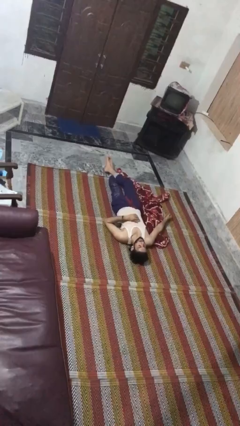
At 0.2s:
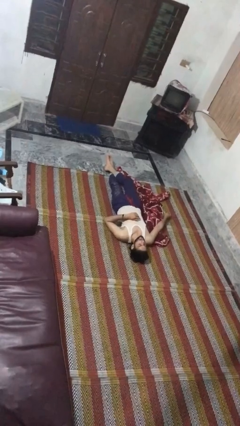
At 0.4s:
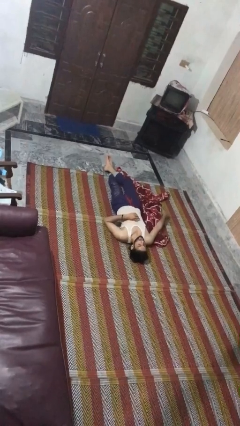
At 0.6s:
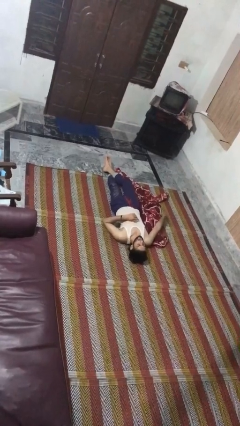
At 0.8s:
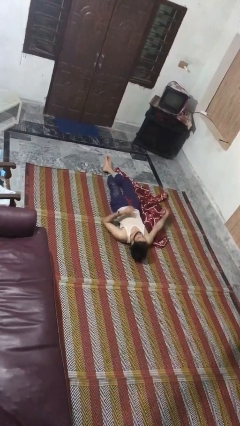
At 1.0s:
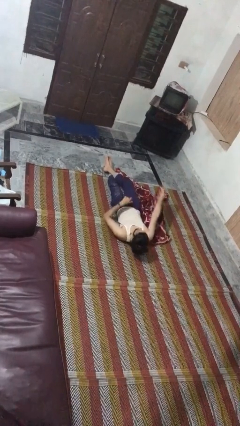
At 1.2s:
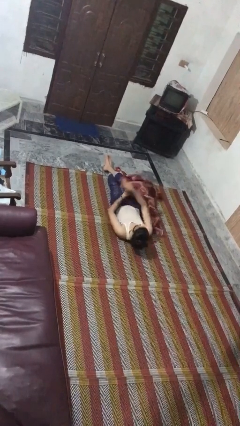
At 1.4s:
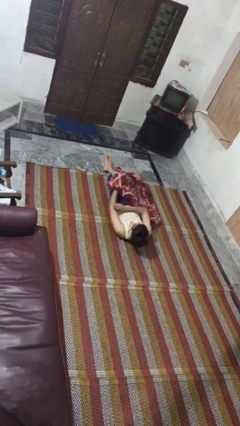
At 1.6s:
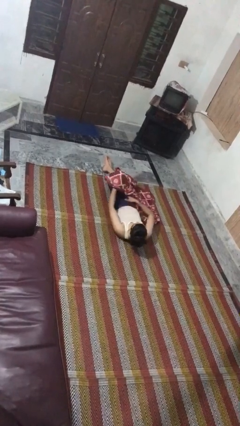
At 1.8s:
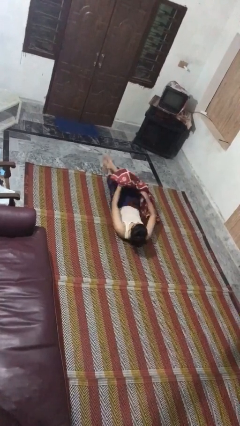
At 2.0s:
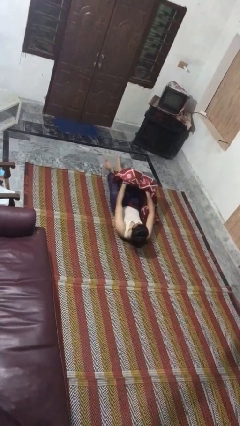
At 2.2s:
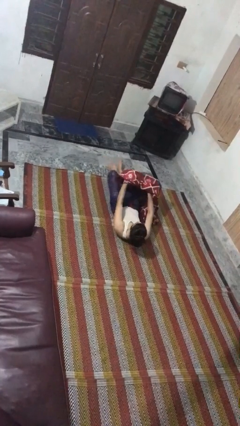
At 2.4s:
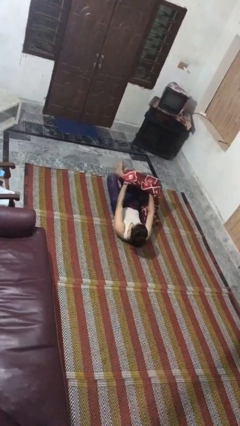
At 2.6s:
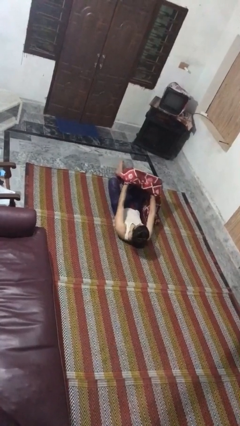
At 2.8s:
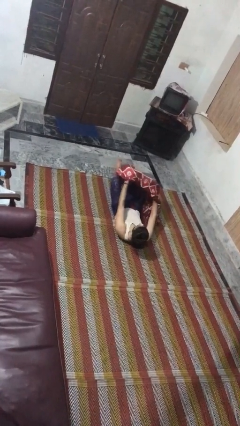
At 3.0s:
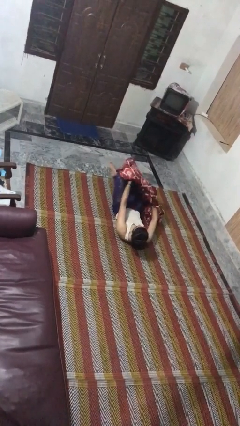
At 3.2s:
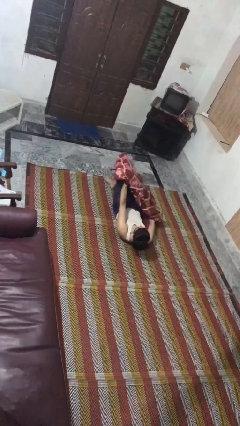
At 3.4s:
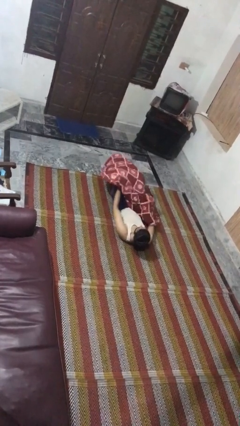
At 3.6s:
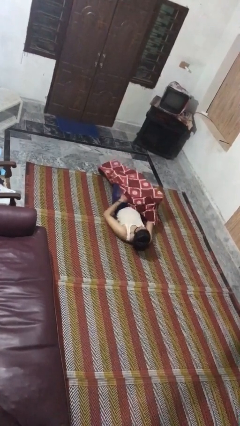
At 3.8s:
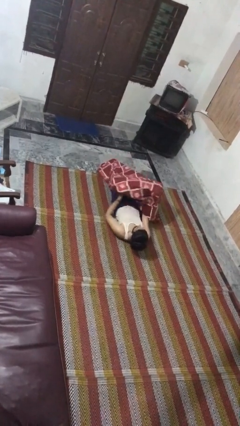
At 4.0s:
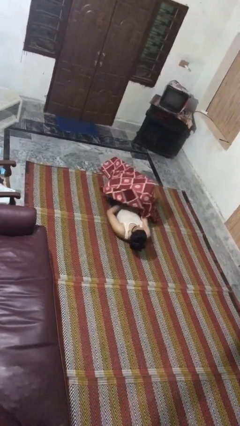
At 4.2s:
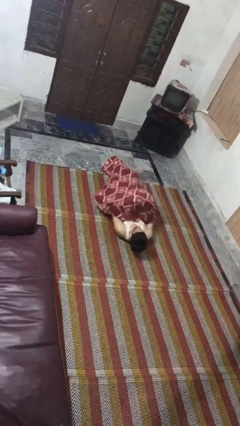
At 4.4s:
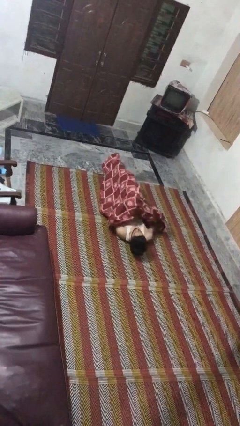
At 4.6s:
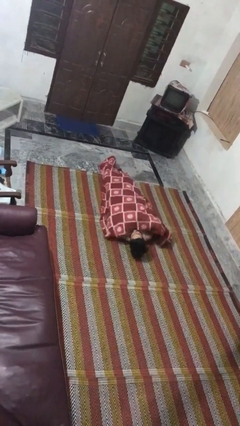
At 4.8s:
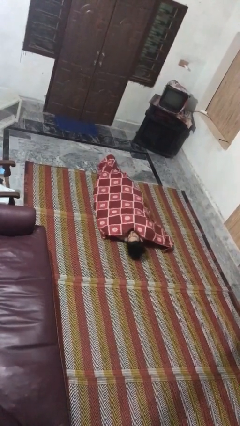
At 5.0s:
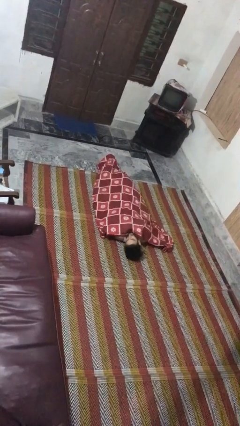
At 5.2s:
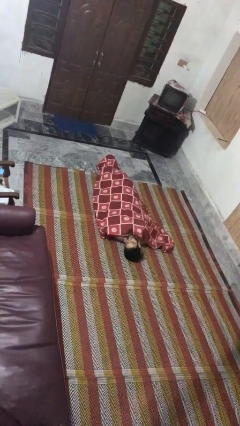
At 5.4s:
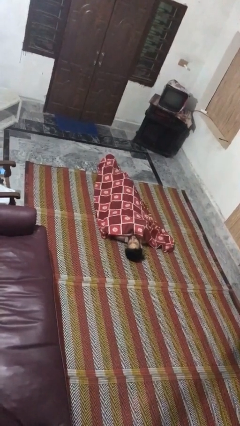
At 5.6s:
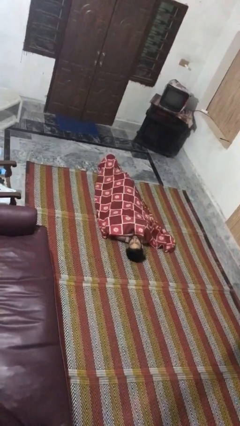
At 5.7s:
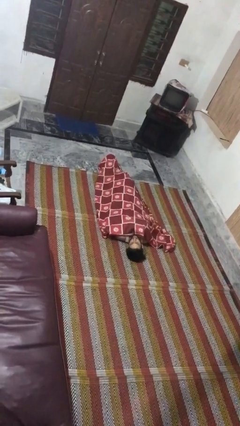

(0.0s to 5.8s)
person covers with blanket

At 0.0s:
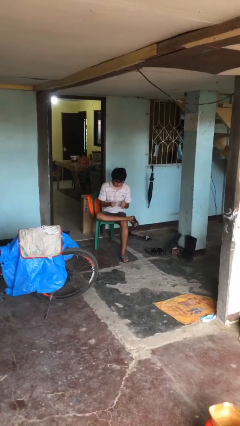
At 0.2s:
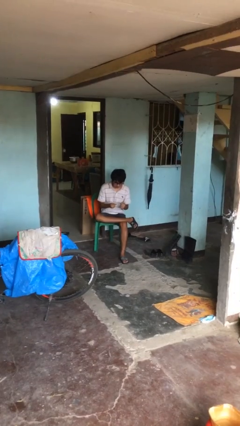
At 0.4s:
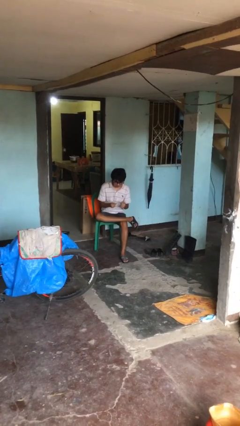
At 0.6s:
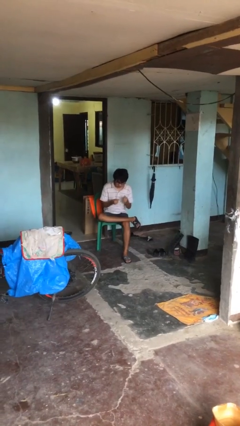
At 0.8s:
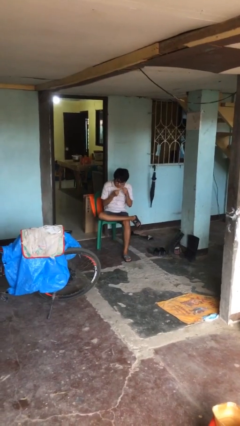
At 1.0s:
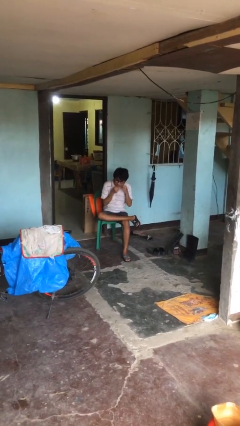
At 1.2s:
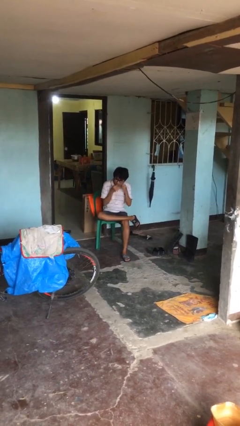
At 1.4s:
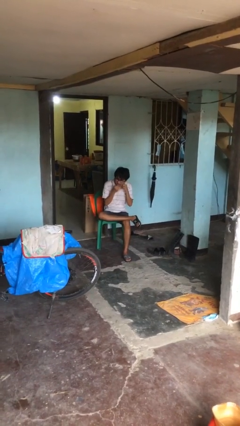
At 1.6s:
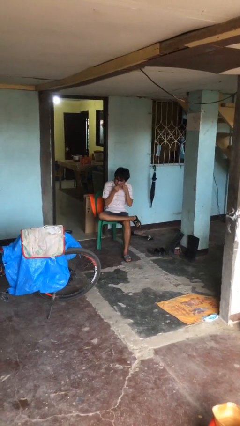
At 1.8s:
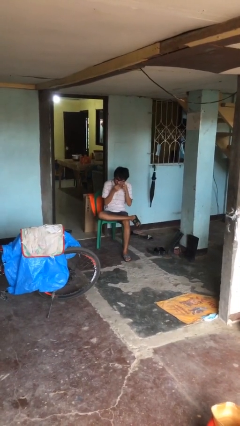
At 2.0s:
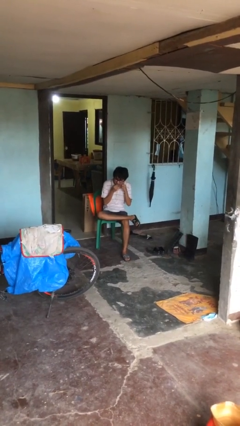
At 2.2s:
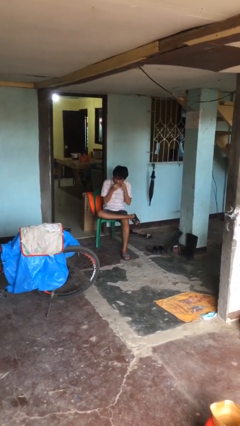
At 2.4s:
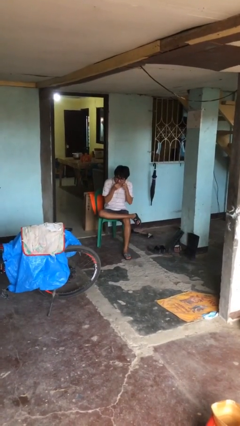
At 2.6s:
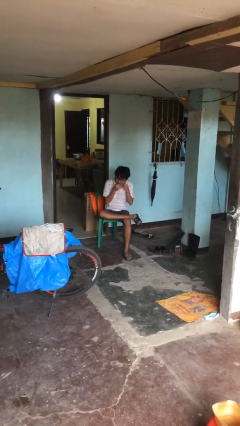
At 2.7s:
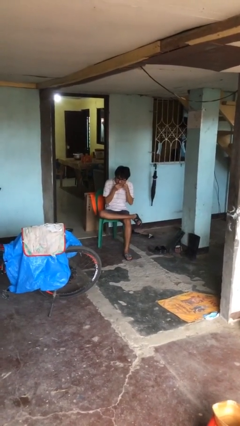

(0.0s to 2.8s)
person flosses

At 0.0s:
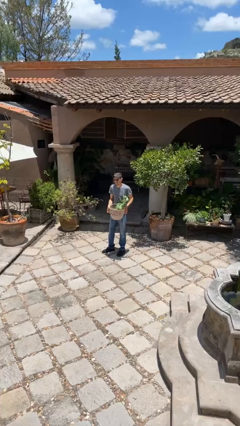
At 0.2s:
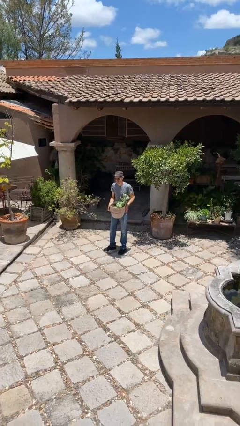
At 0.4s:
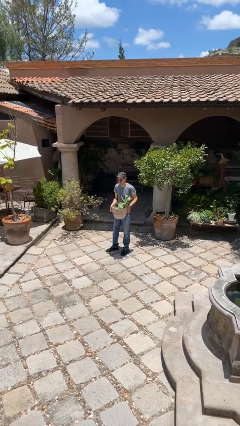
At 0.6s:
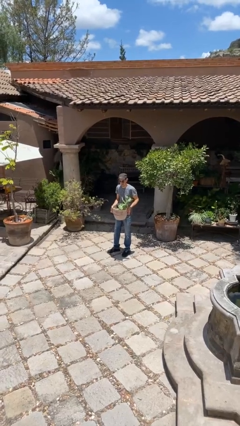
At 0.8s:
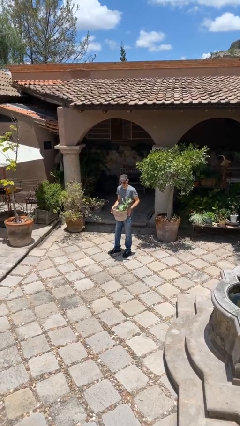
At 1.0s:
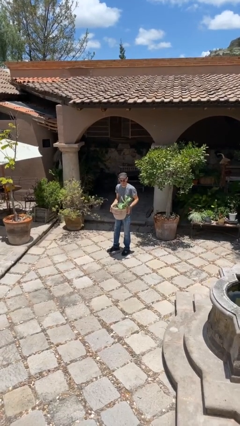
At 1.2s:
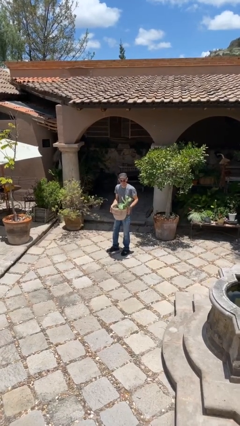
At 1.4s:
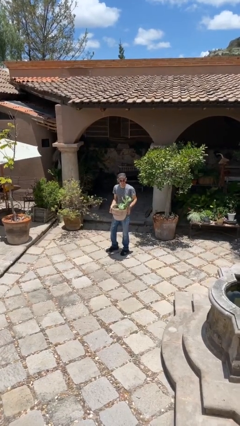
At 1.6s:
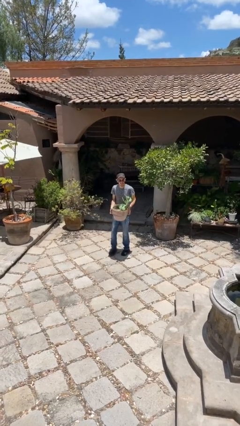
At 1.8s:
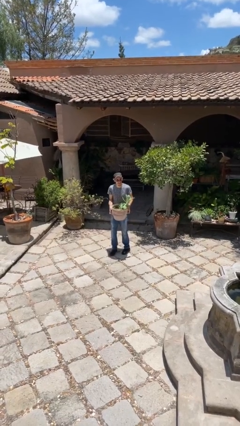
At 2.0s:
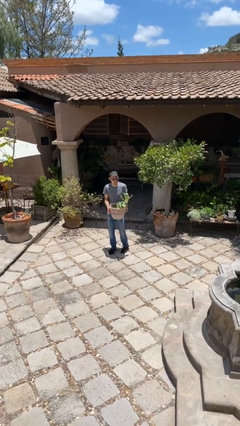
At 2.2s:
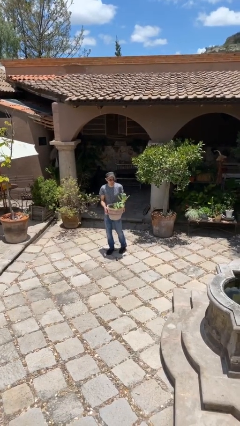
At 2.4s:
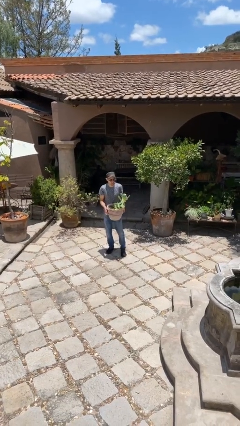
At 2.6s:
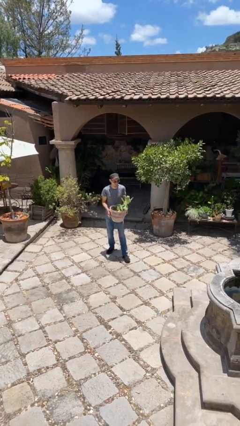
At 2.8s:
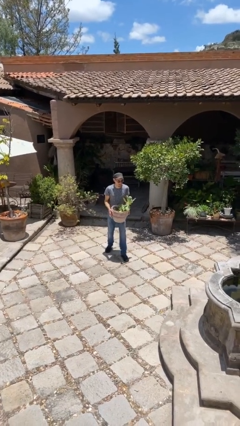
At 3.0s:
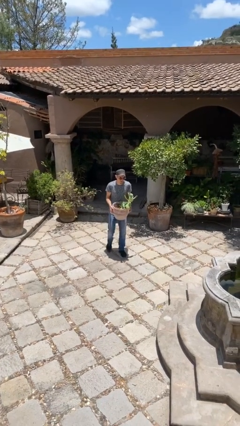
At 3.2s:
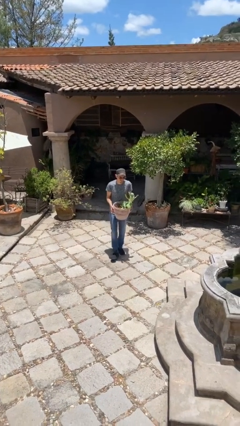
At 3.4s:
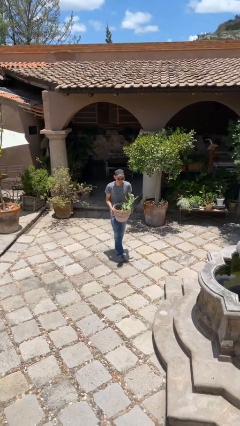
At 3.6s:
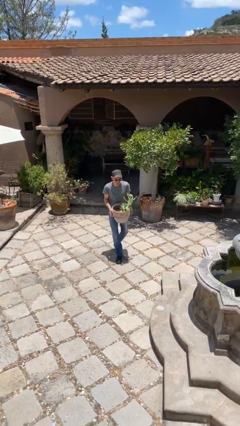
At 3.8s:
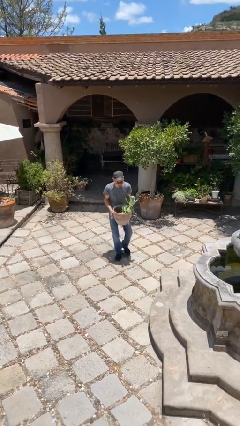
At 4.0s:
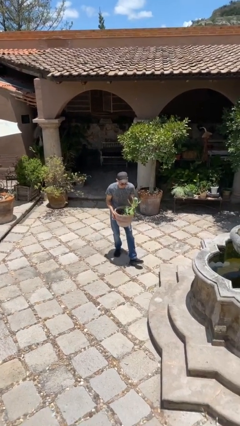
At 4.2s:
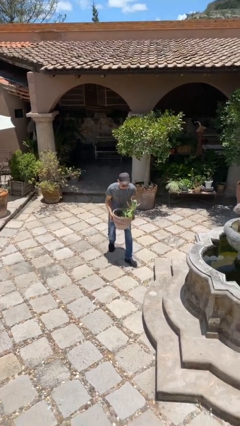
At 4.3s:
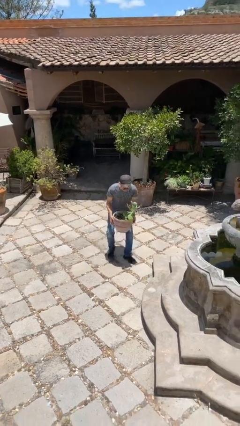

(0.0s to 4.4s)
person carries heavy object

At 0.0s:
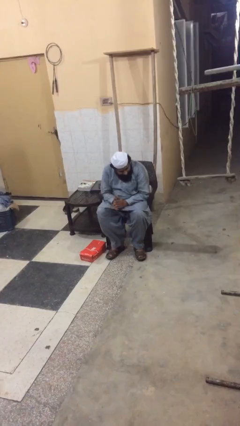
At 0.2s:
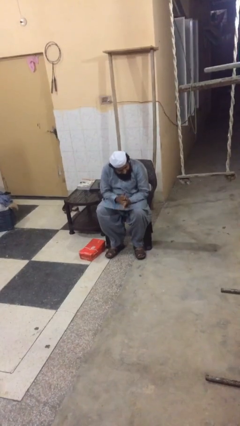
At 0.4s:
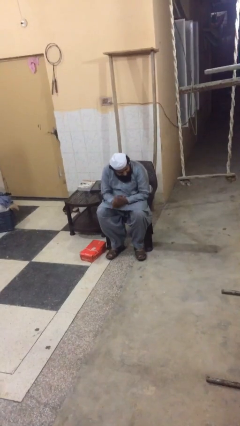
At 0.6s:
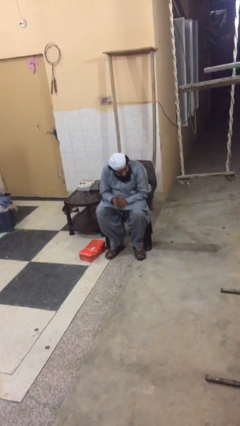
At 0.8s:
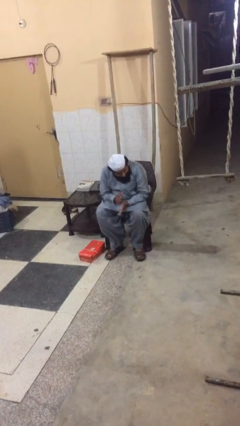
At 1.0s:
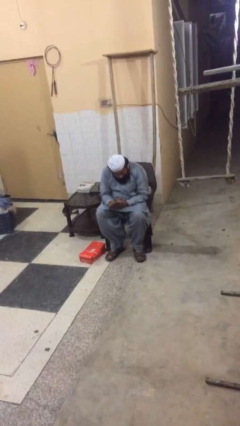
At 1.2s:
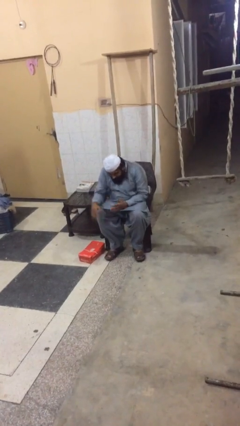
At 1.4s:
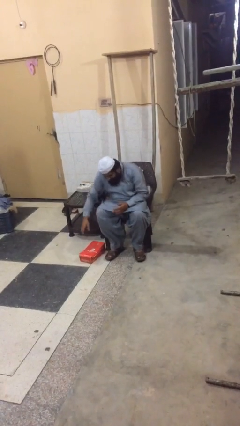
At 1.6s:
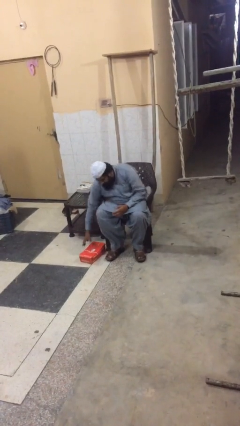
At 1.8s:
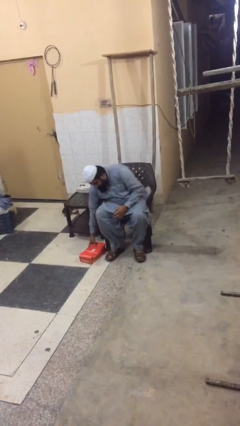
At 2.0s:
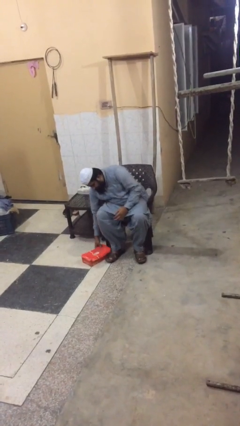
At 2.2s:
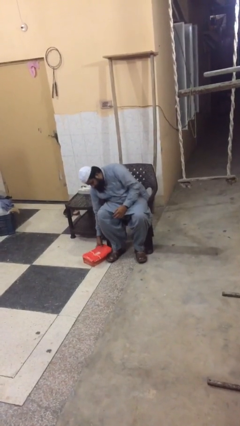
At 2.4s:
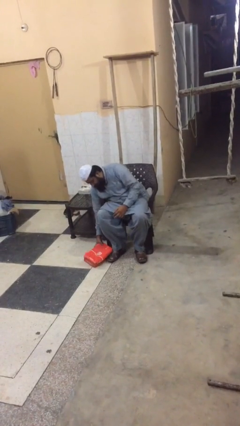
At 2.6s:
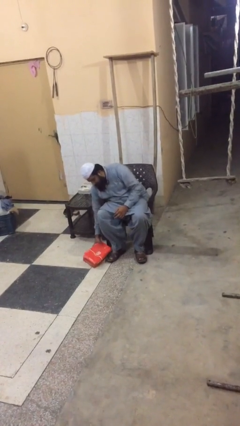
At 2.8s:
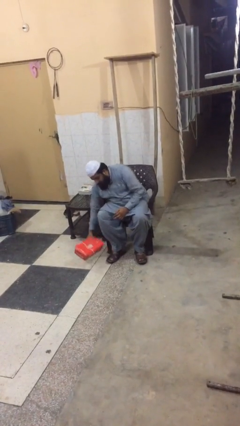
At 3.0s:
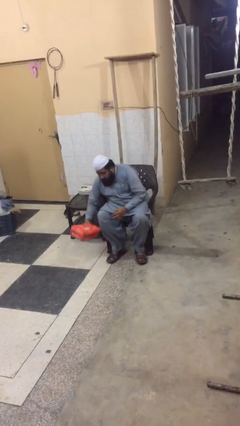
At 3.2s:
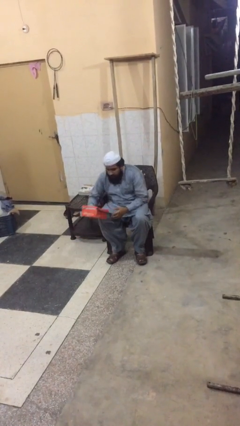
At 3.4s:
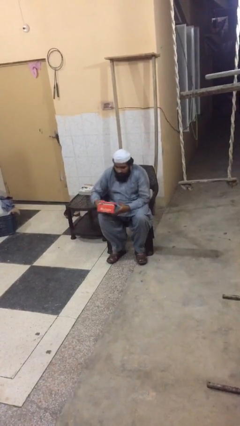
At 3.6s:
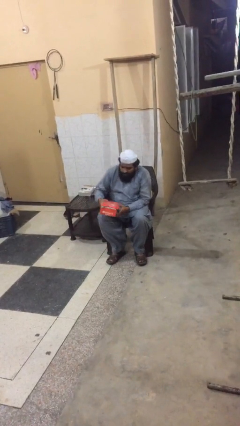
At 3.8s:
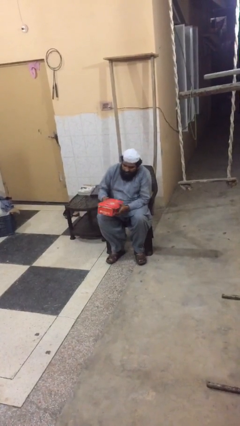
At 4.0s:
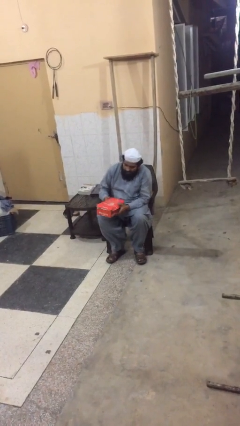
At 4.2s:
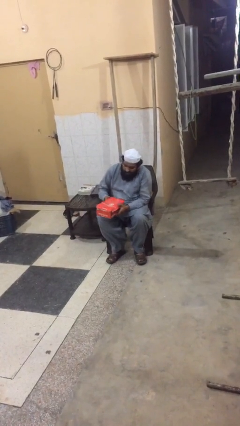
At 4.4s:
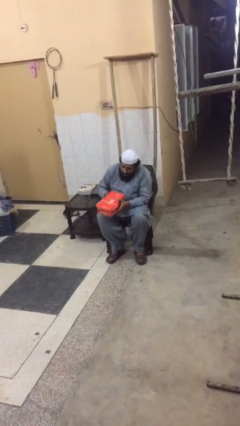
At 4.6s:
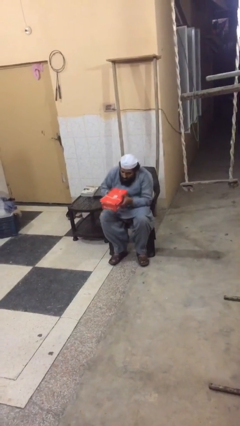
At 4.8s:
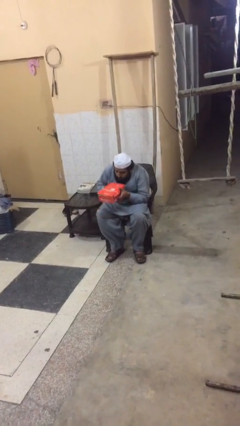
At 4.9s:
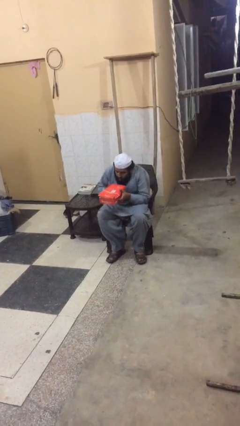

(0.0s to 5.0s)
person picks up object from floor

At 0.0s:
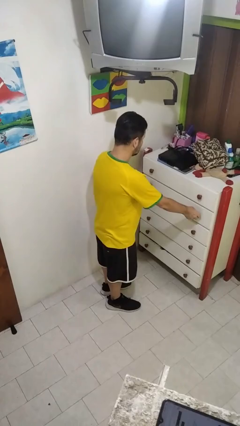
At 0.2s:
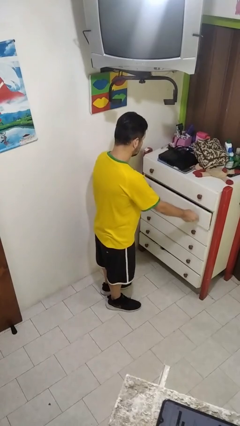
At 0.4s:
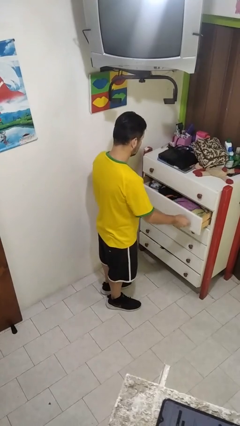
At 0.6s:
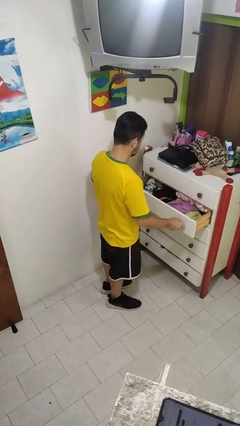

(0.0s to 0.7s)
person opens dresser drawer
